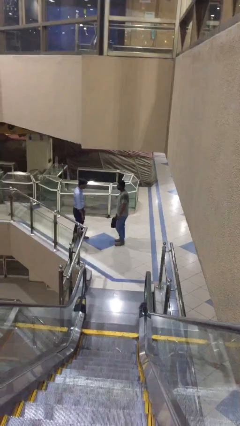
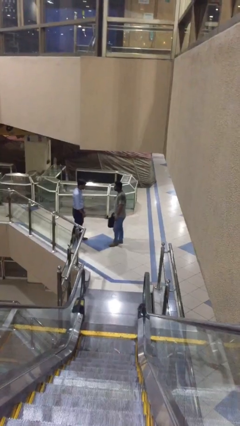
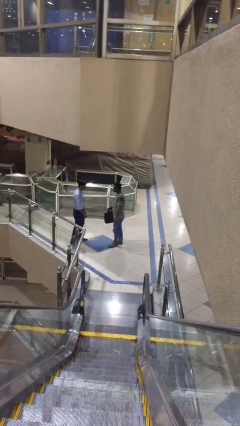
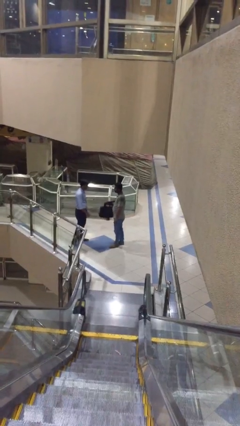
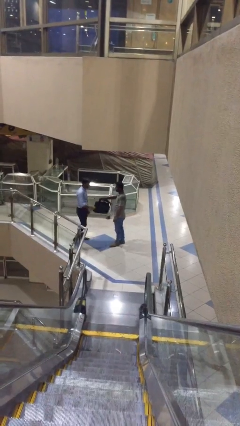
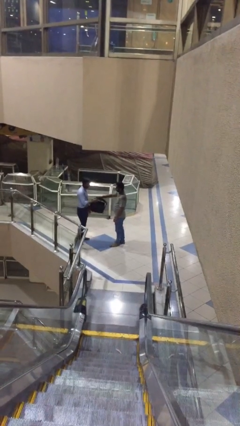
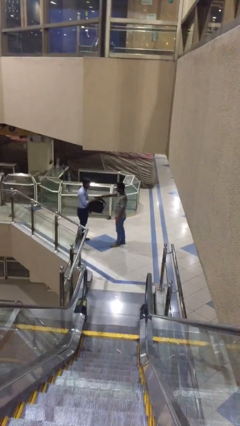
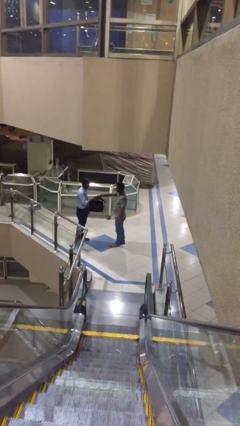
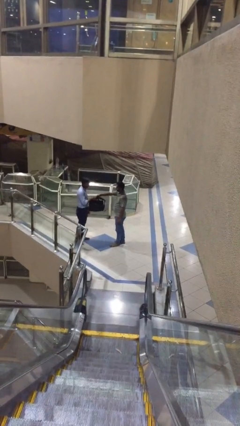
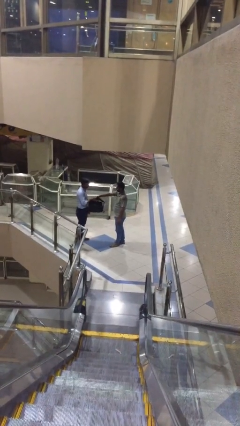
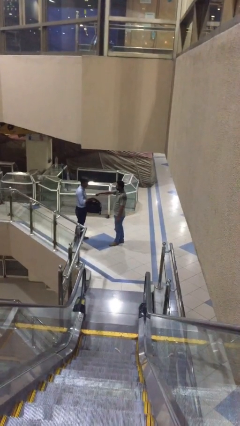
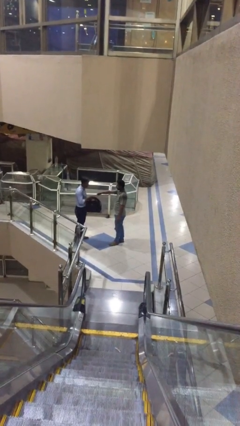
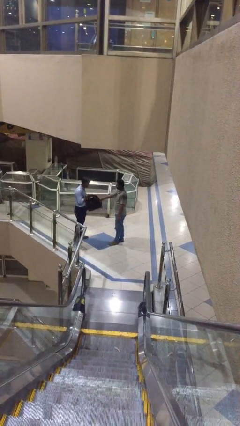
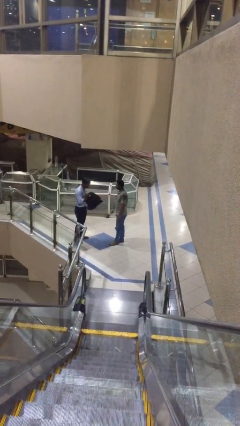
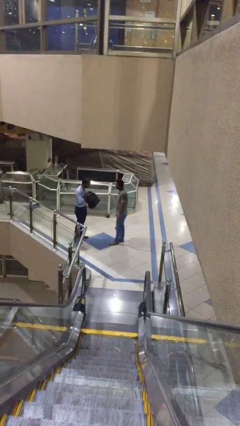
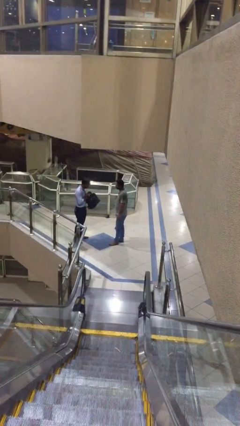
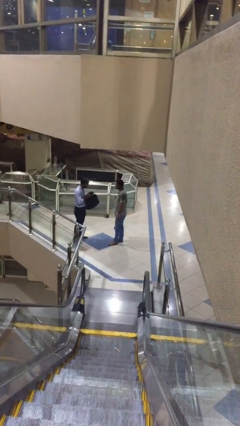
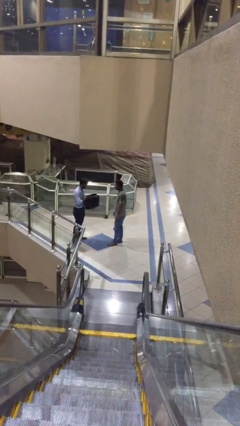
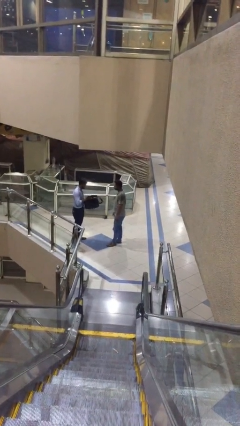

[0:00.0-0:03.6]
person transfers object to person

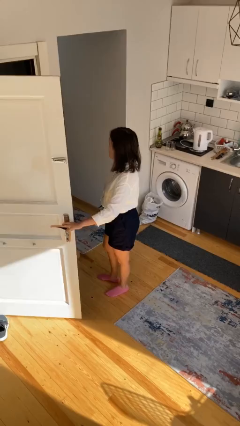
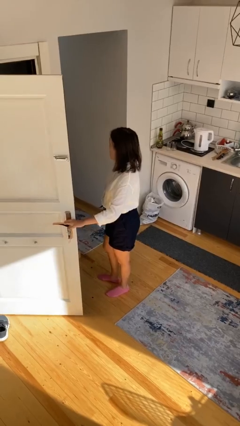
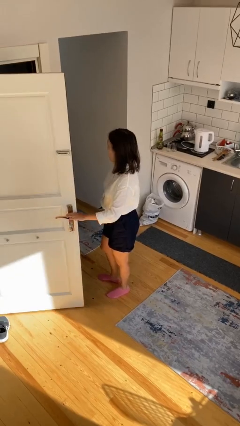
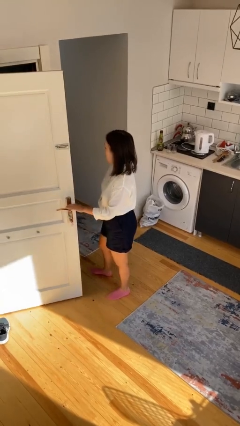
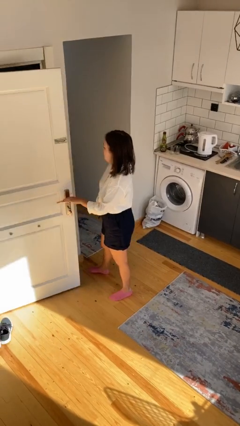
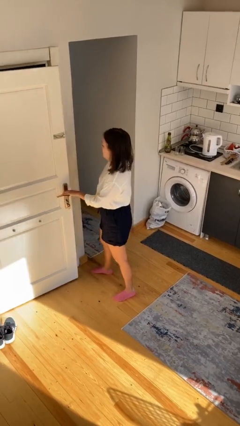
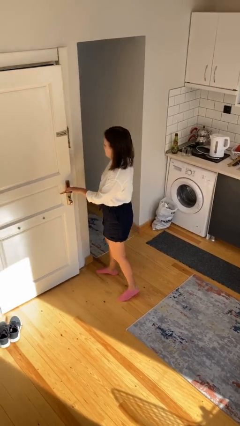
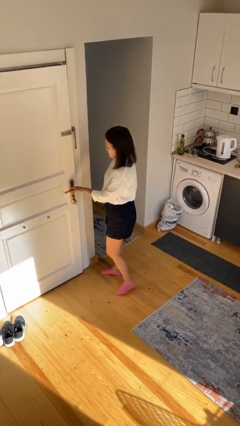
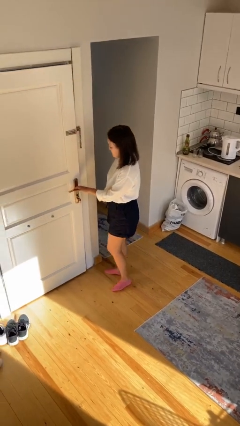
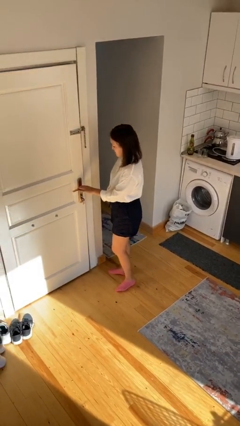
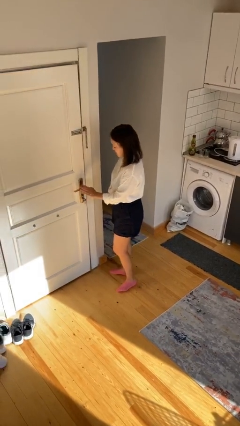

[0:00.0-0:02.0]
person closes facility door

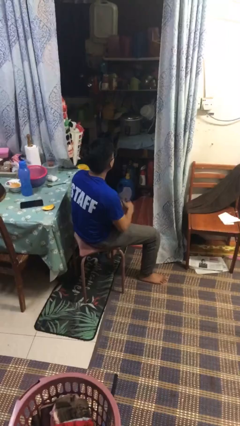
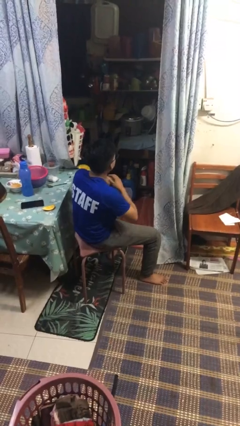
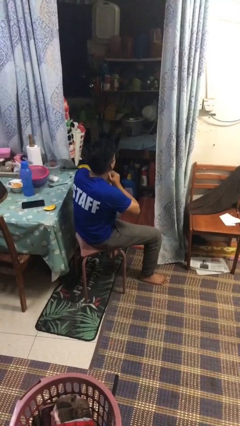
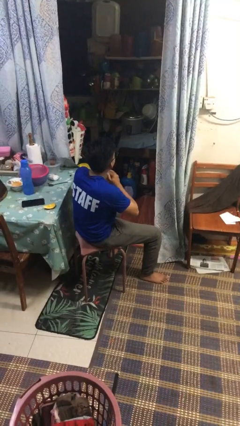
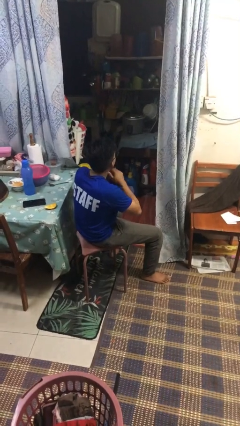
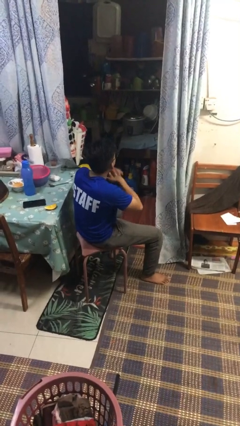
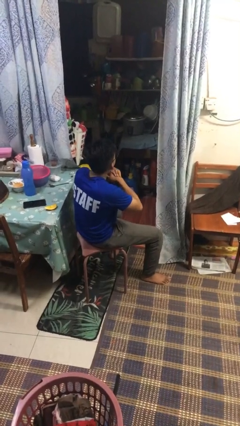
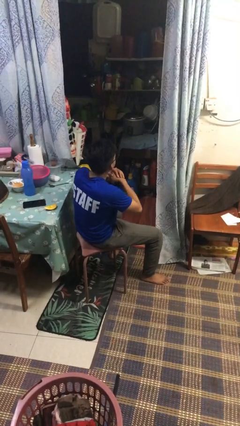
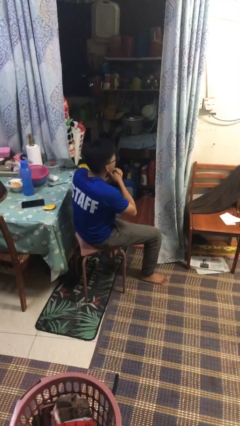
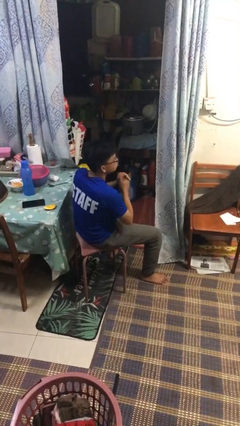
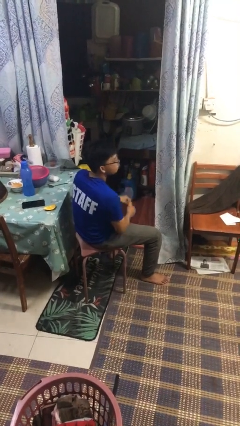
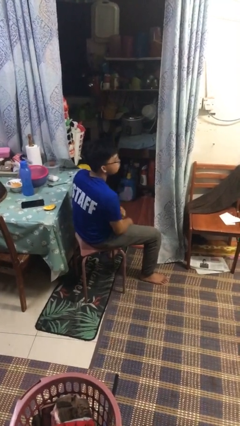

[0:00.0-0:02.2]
person cracks knuckles

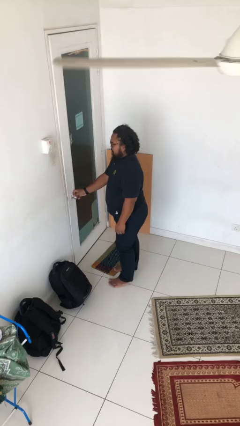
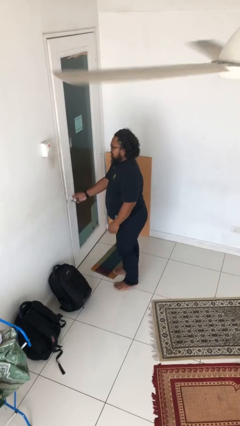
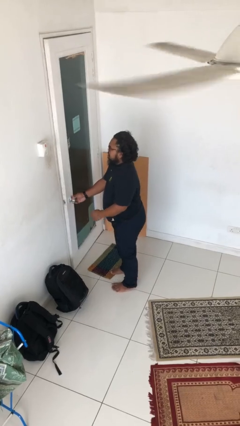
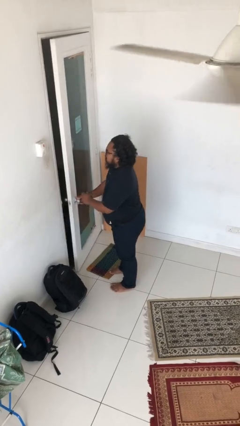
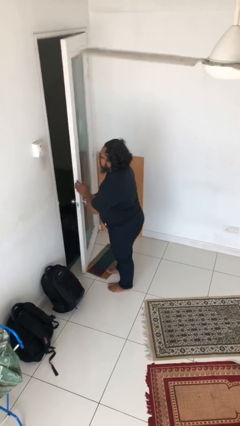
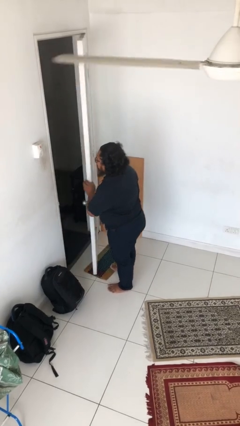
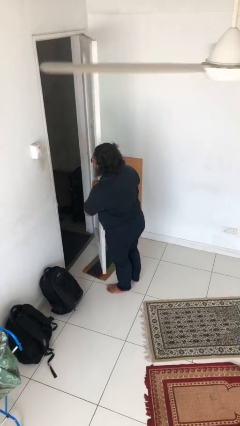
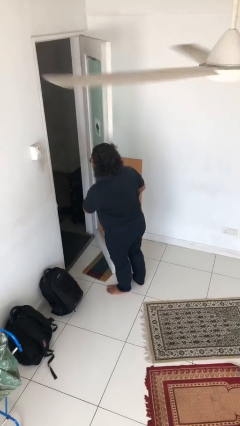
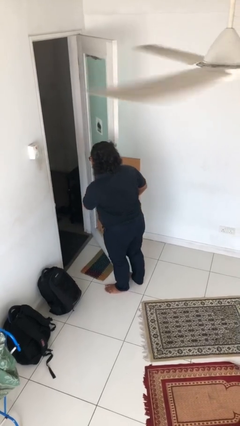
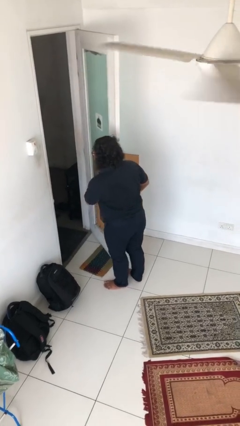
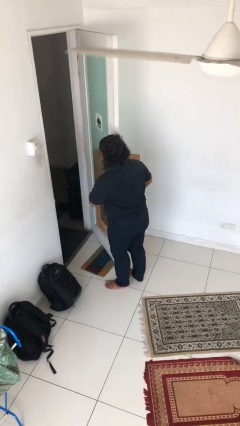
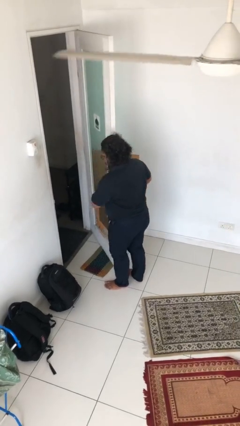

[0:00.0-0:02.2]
person opens facility door

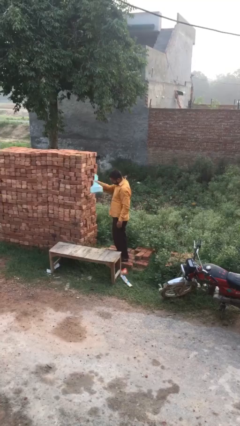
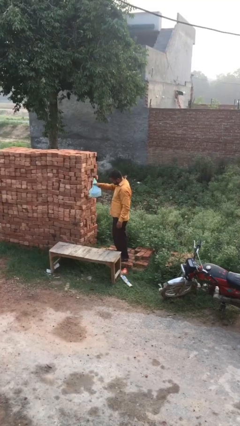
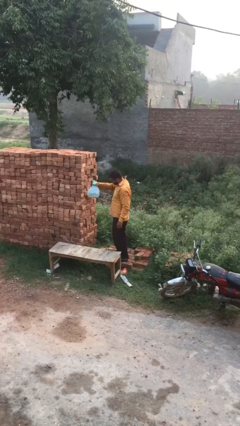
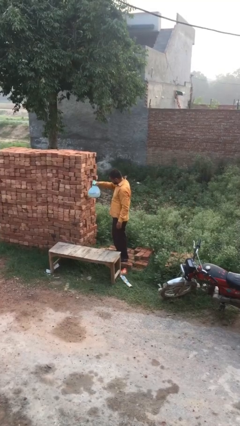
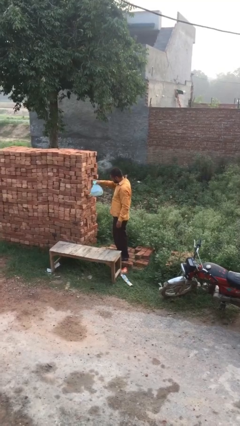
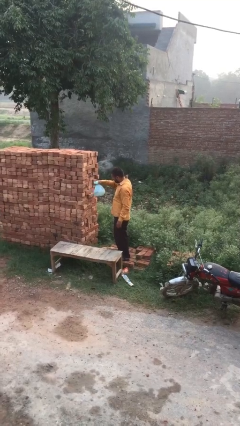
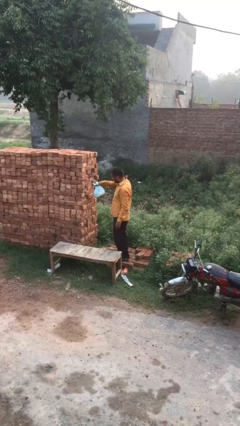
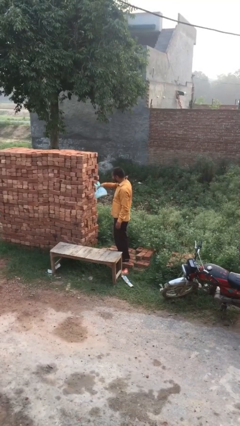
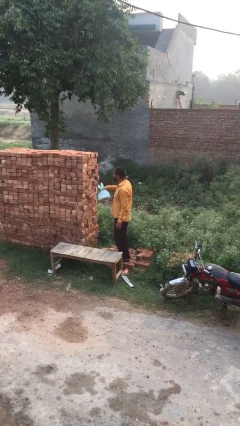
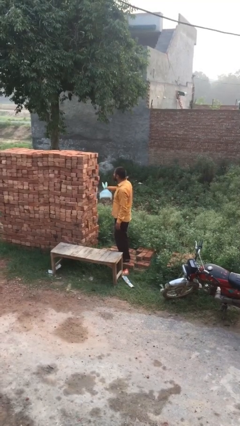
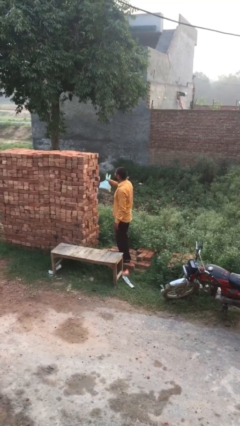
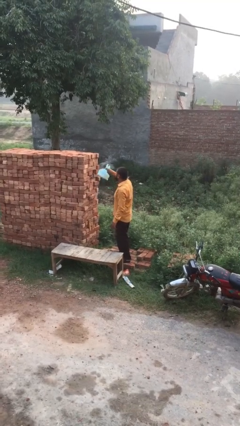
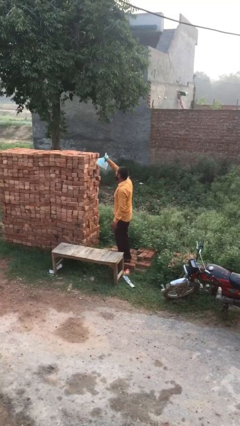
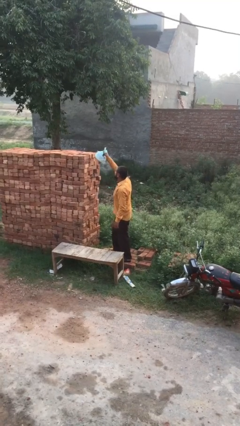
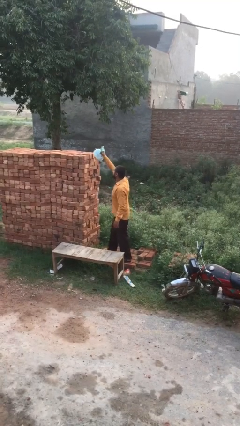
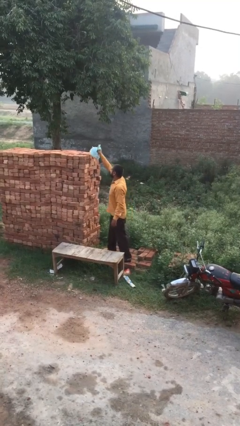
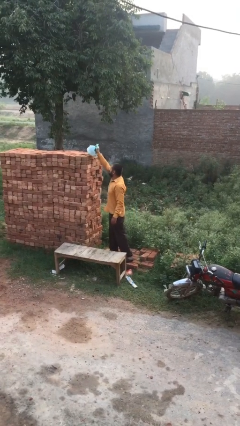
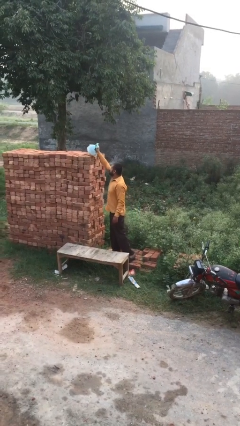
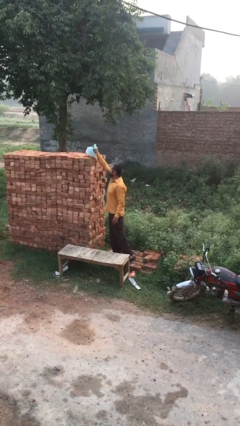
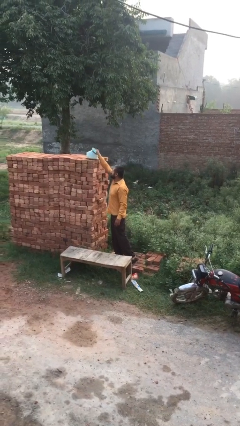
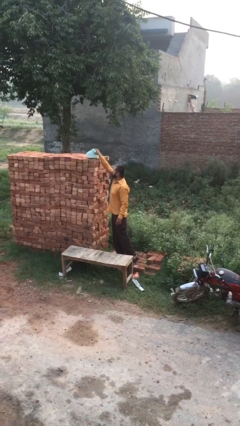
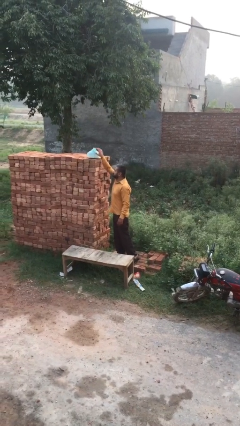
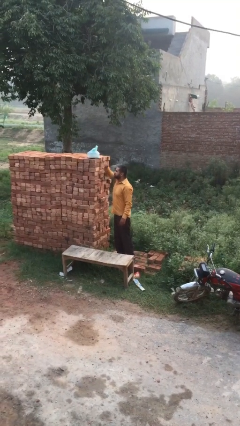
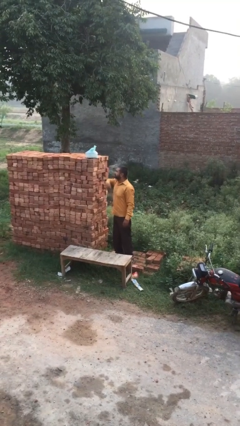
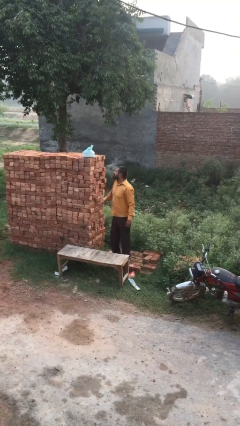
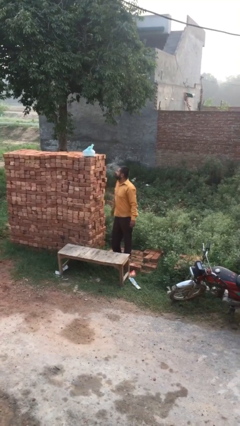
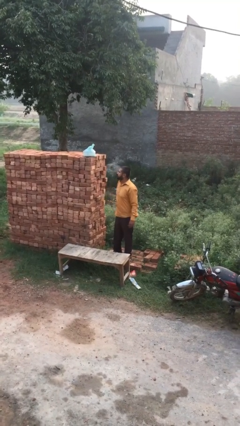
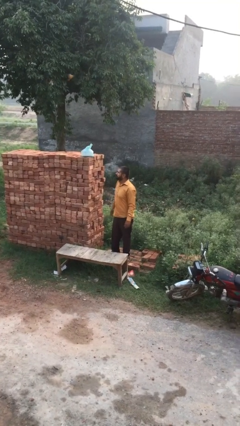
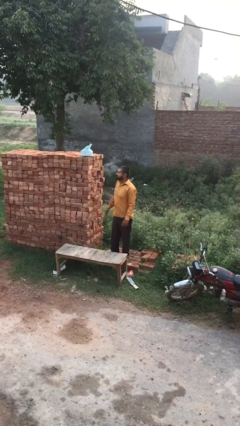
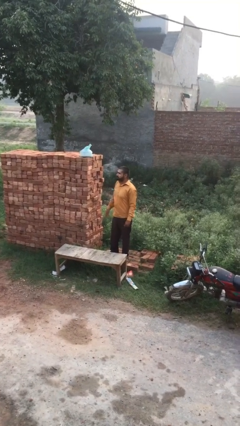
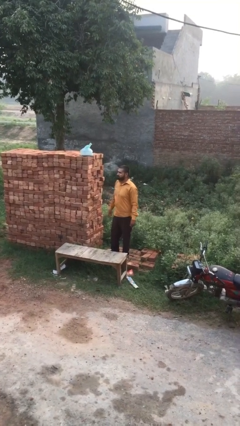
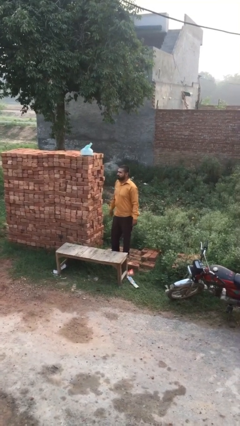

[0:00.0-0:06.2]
person puts down object on shelf

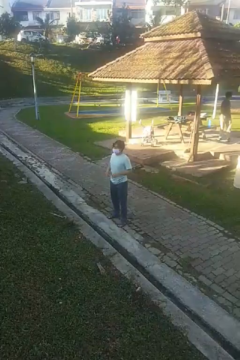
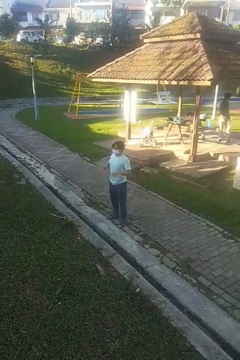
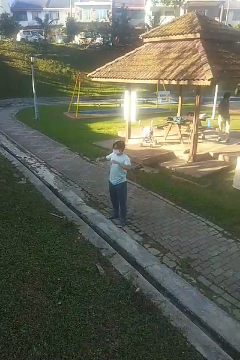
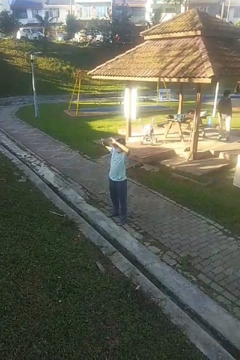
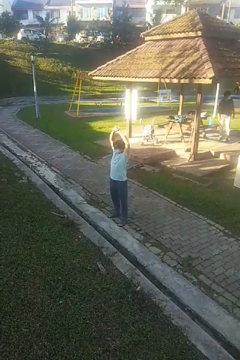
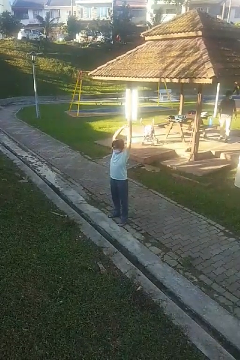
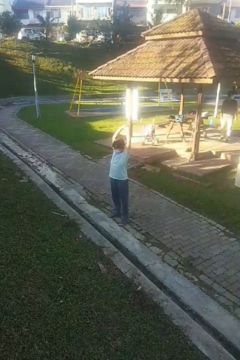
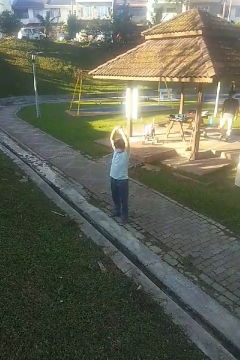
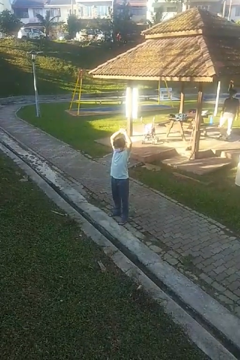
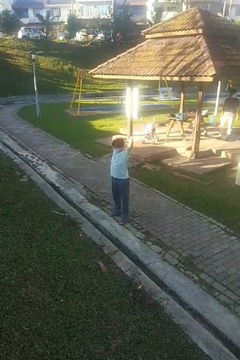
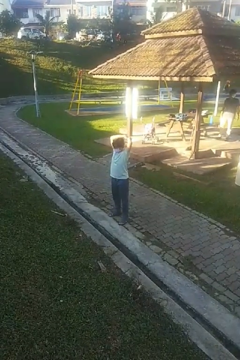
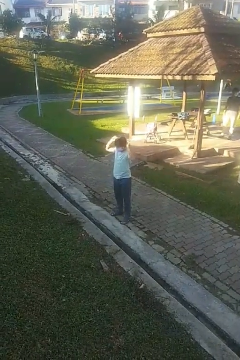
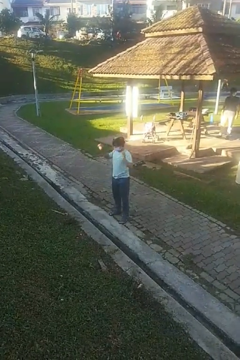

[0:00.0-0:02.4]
person stretches arms over head
